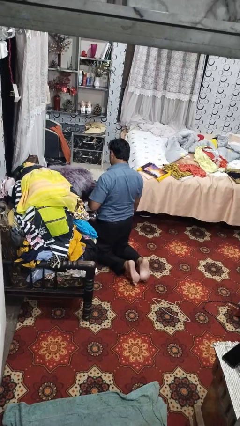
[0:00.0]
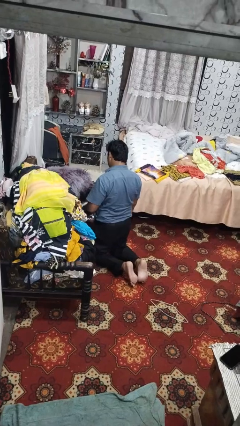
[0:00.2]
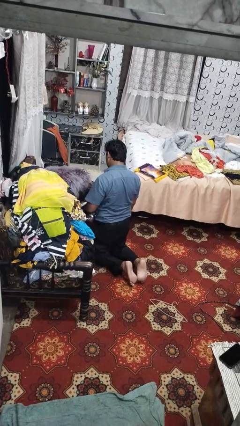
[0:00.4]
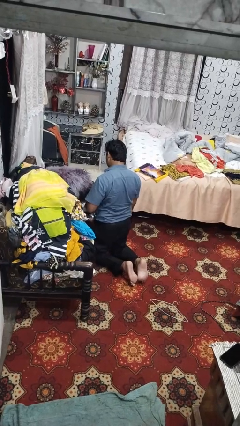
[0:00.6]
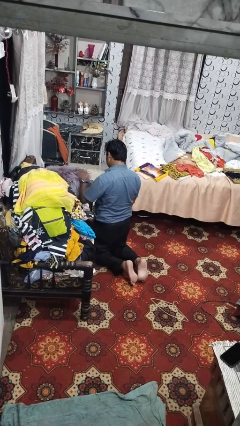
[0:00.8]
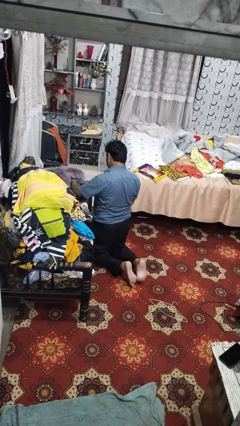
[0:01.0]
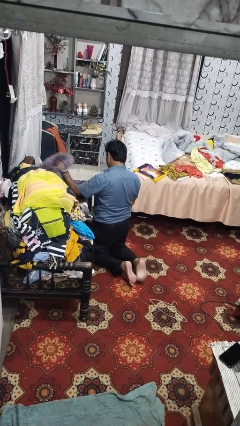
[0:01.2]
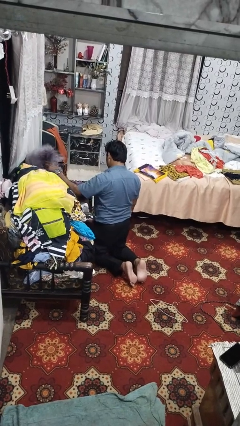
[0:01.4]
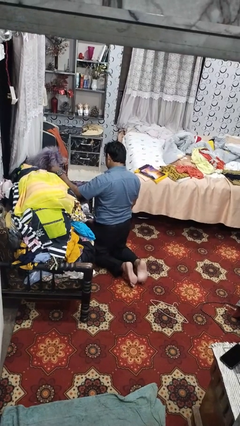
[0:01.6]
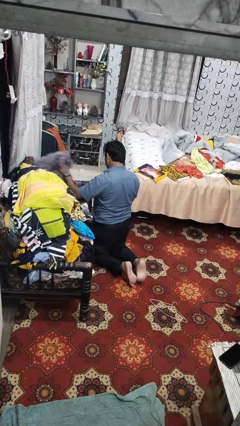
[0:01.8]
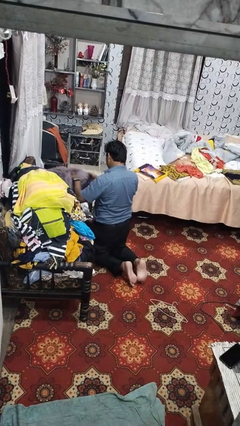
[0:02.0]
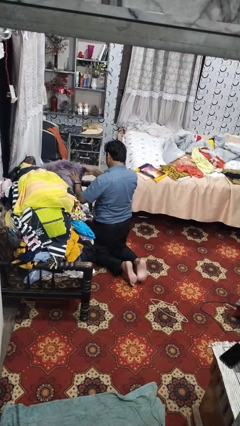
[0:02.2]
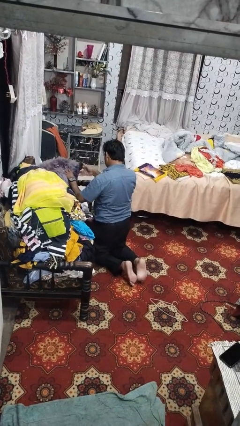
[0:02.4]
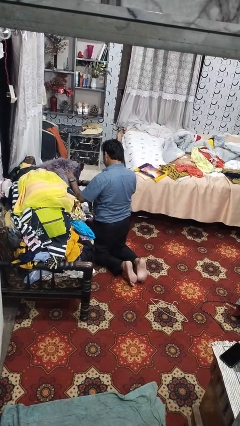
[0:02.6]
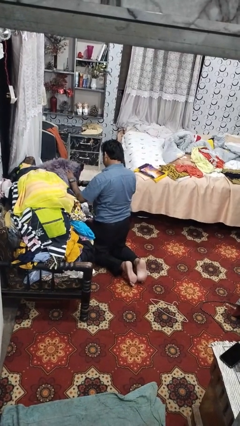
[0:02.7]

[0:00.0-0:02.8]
person searches in couch

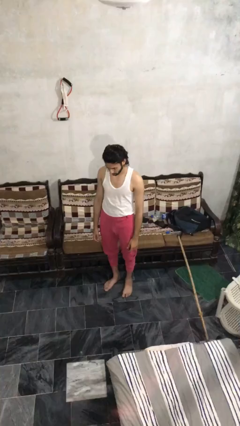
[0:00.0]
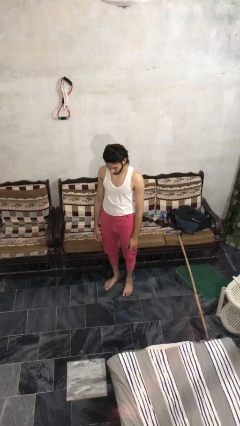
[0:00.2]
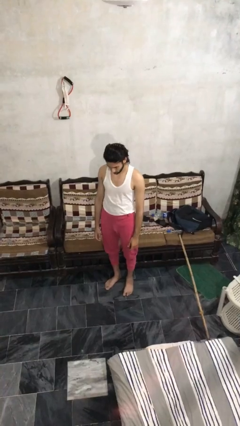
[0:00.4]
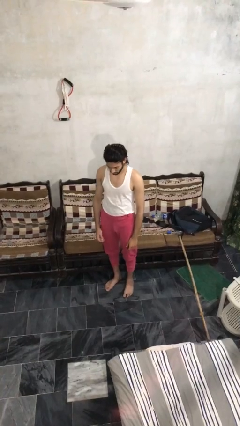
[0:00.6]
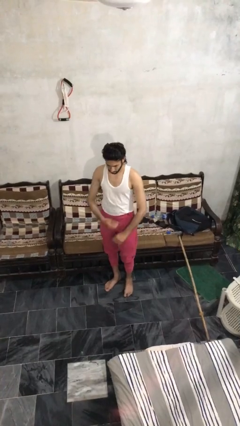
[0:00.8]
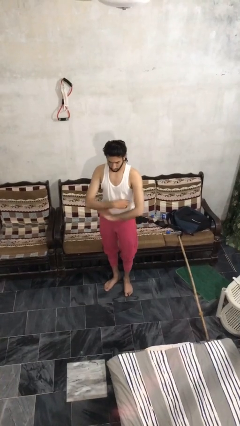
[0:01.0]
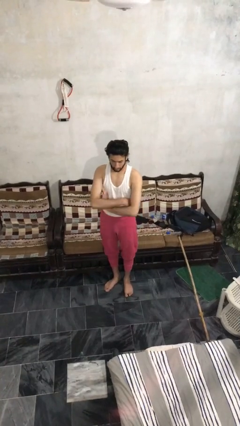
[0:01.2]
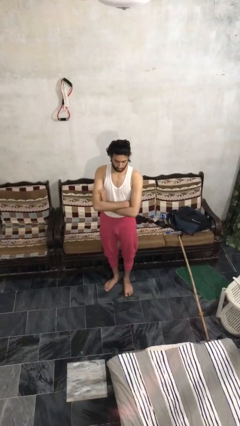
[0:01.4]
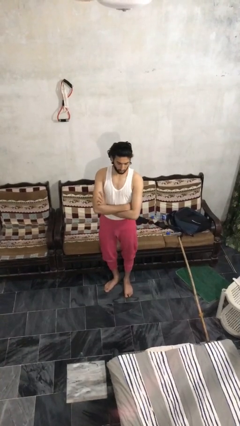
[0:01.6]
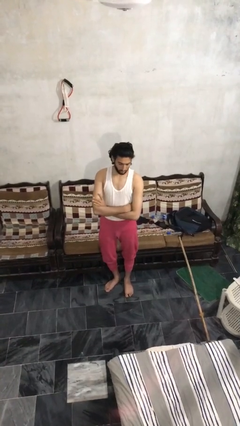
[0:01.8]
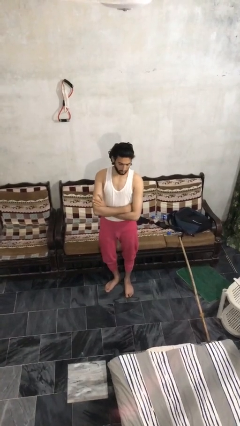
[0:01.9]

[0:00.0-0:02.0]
person crosses arms

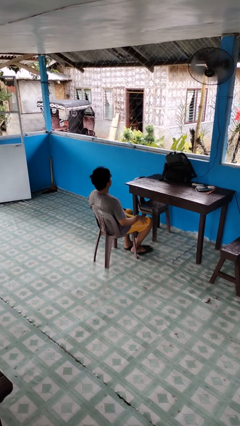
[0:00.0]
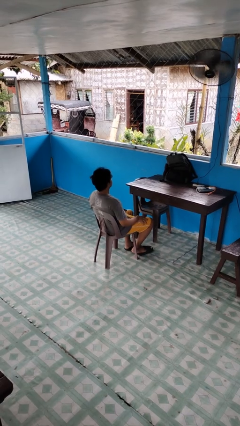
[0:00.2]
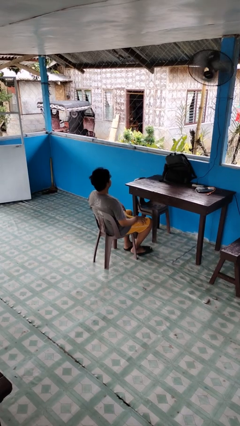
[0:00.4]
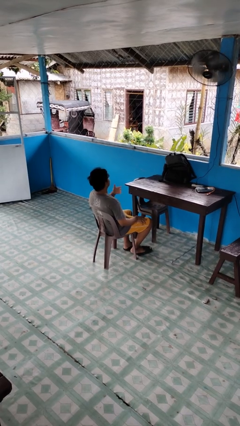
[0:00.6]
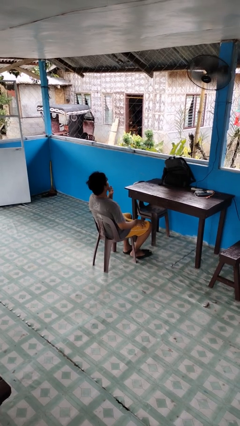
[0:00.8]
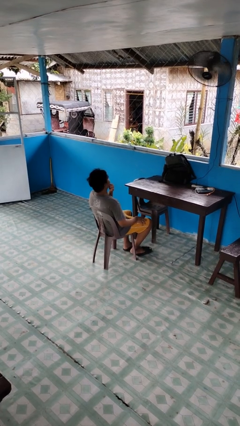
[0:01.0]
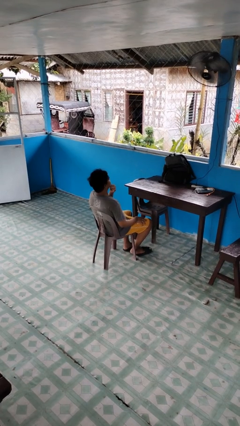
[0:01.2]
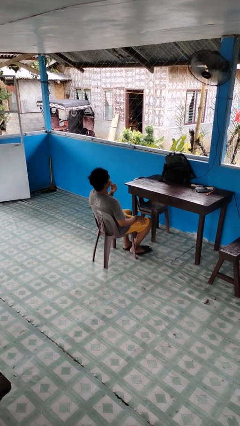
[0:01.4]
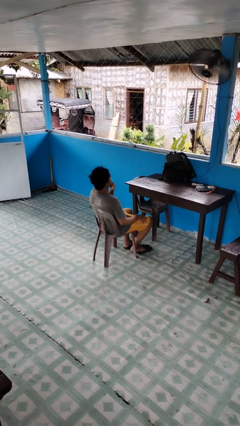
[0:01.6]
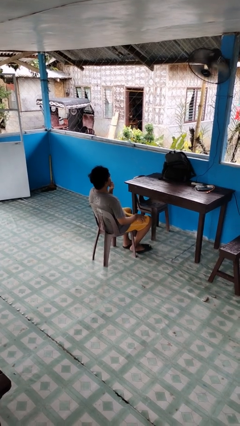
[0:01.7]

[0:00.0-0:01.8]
person strokes chin

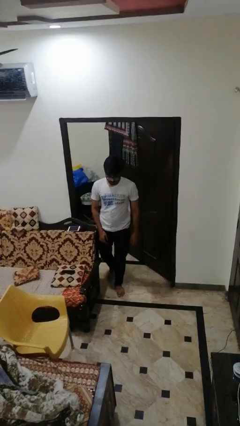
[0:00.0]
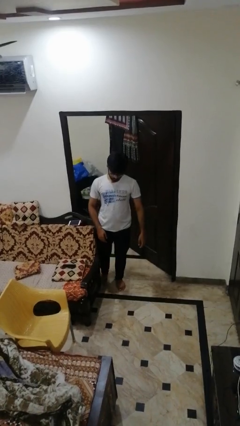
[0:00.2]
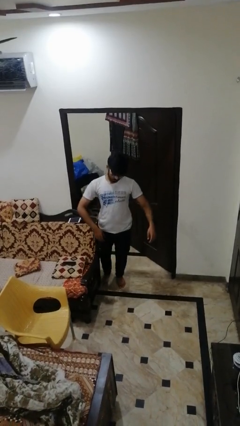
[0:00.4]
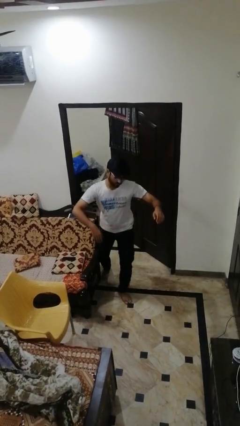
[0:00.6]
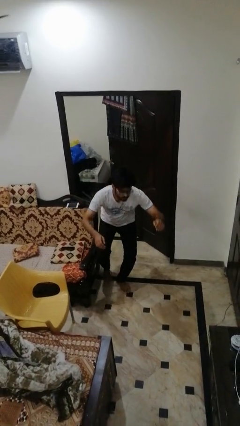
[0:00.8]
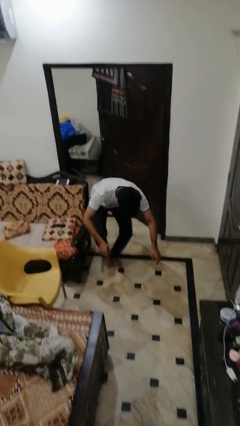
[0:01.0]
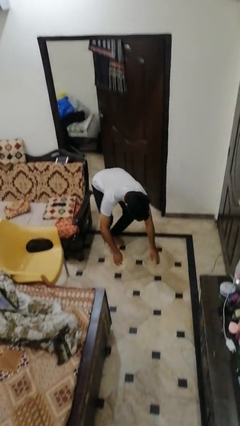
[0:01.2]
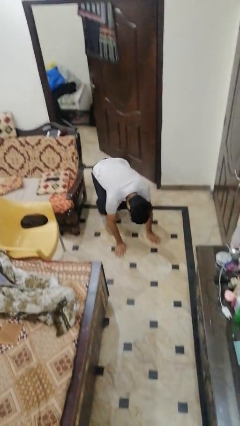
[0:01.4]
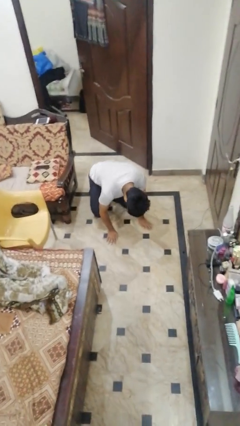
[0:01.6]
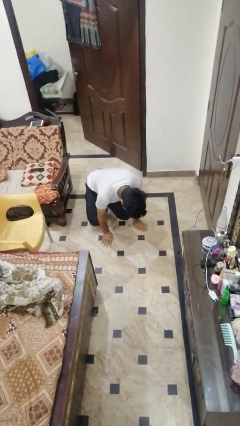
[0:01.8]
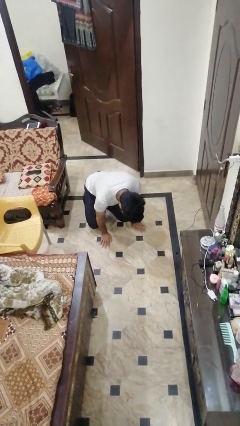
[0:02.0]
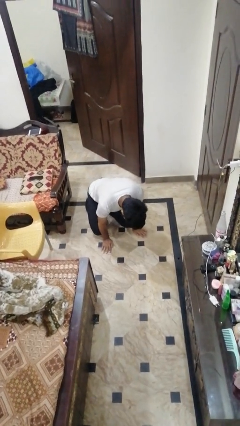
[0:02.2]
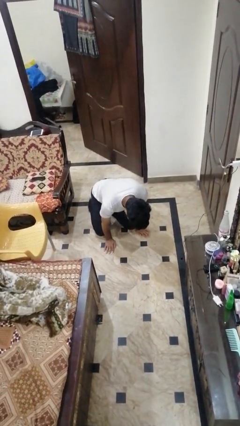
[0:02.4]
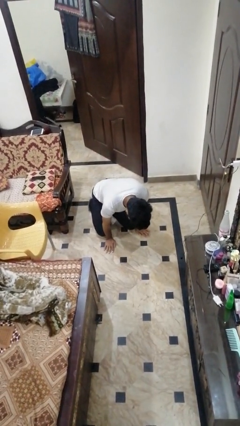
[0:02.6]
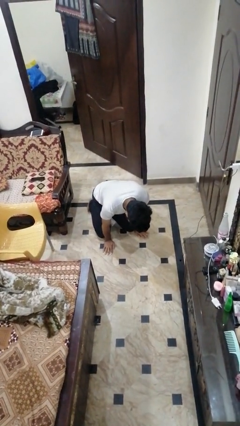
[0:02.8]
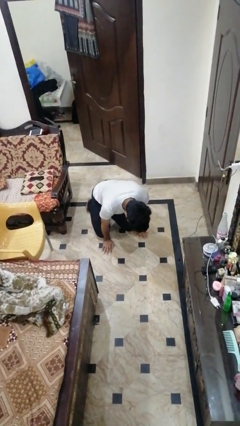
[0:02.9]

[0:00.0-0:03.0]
person trips on object on floor

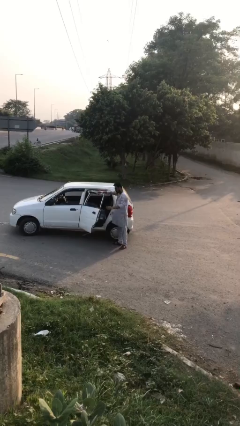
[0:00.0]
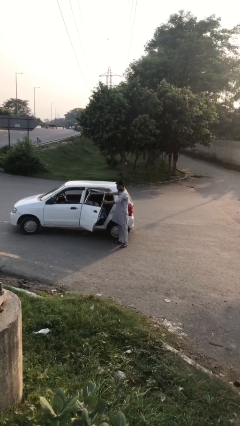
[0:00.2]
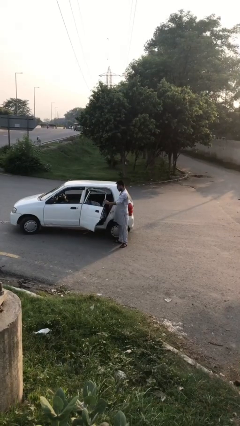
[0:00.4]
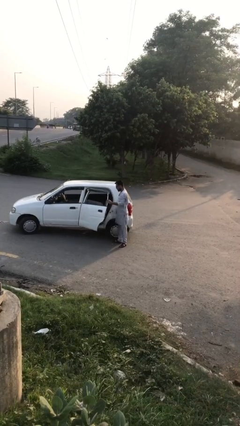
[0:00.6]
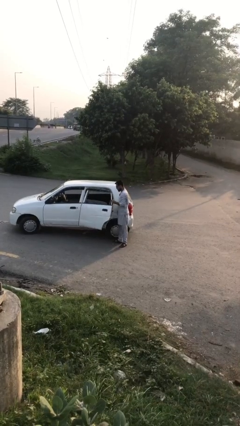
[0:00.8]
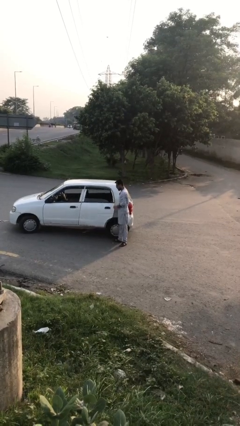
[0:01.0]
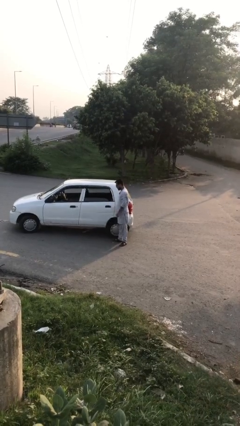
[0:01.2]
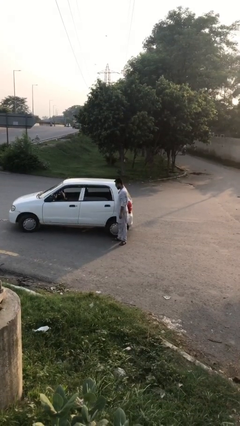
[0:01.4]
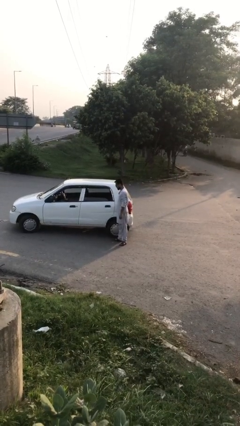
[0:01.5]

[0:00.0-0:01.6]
person closes car door

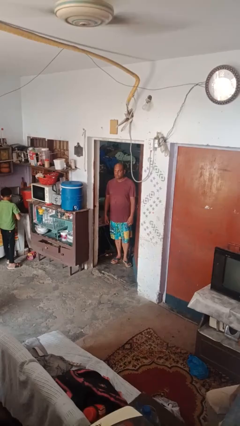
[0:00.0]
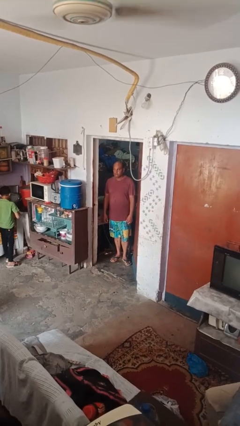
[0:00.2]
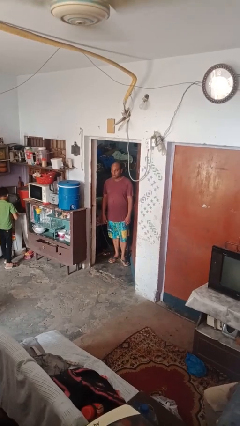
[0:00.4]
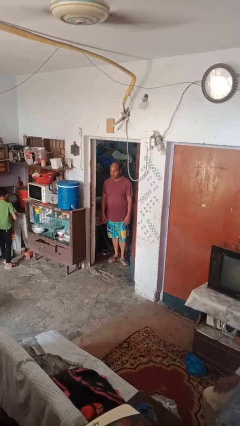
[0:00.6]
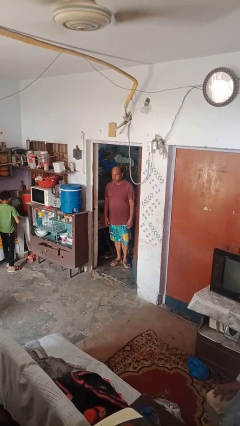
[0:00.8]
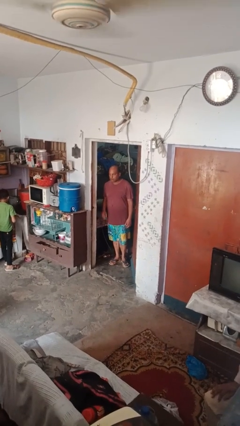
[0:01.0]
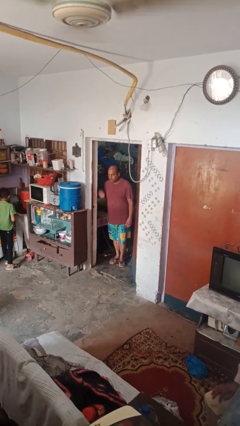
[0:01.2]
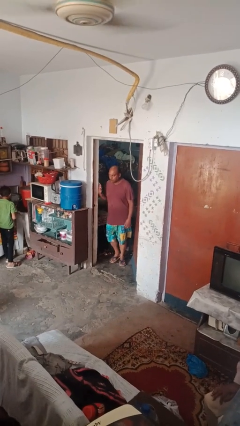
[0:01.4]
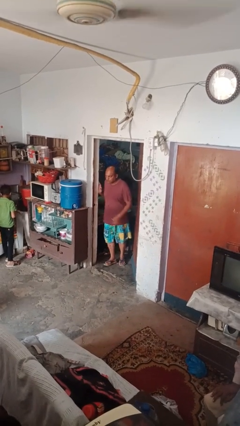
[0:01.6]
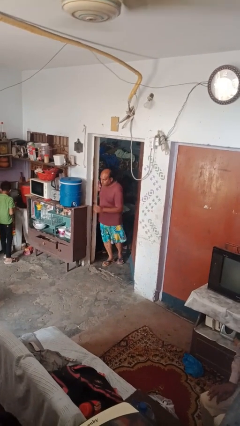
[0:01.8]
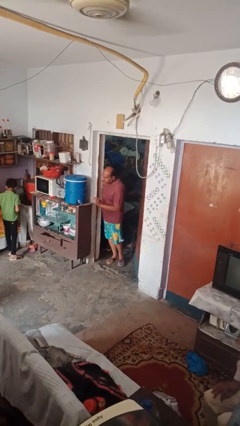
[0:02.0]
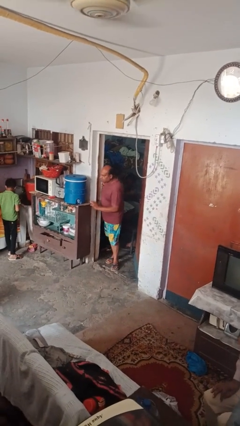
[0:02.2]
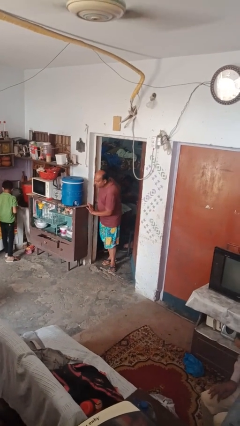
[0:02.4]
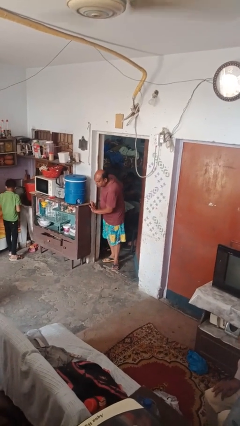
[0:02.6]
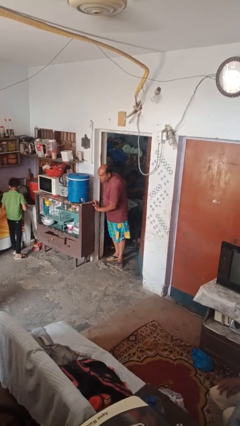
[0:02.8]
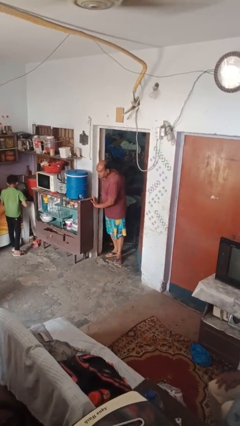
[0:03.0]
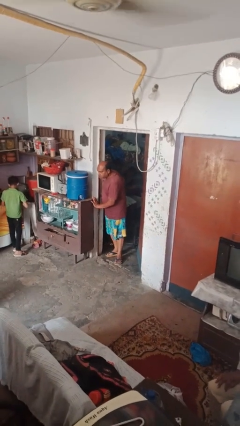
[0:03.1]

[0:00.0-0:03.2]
person bumps into wall

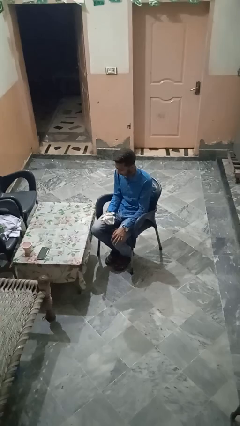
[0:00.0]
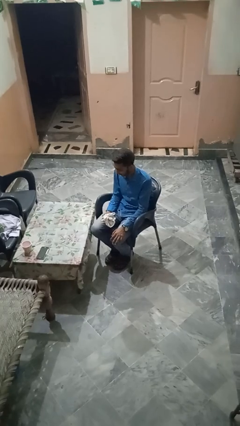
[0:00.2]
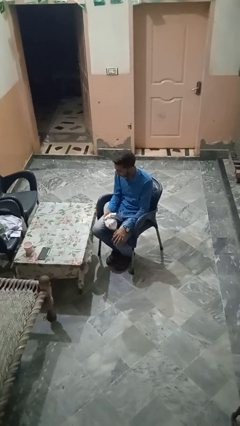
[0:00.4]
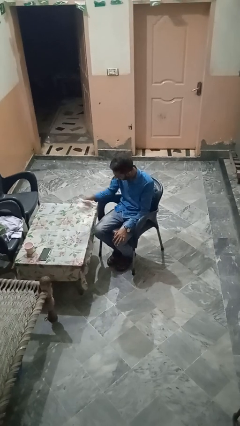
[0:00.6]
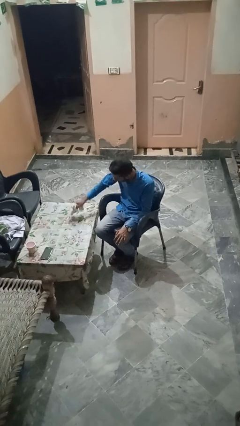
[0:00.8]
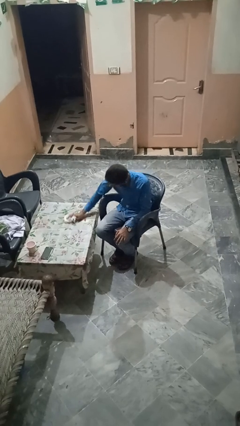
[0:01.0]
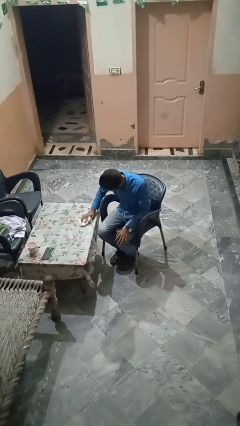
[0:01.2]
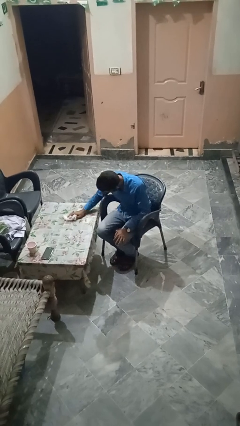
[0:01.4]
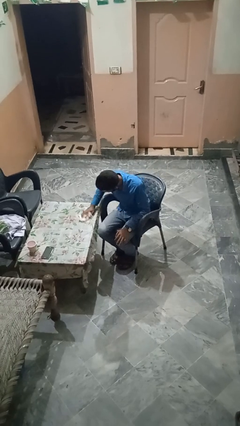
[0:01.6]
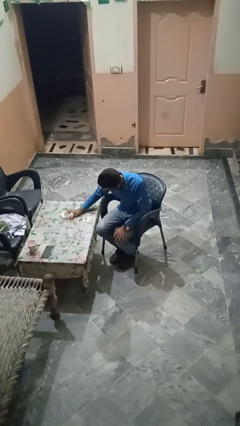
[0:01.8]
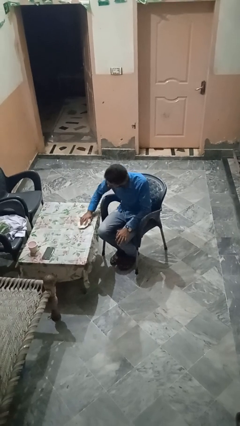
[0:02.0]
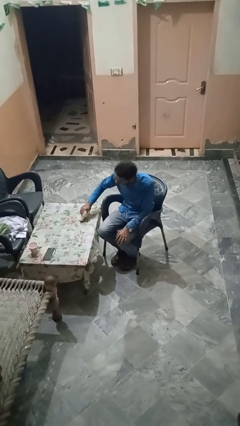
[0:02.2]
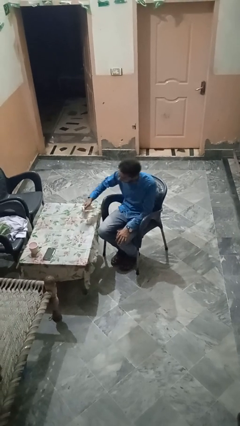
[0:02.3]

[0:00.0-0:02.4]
person cleans table with rag

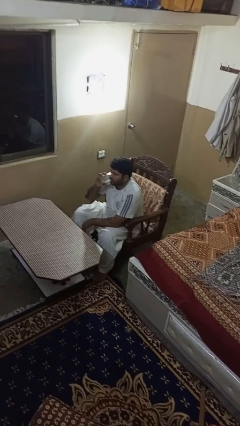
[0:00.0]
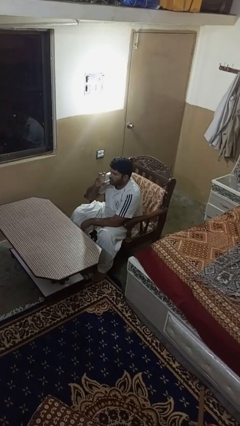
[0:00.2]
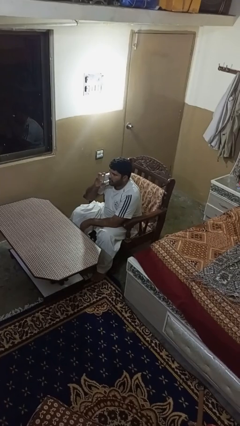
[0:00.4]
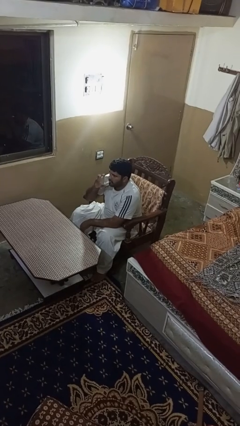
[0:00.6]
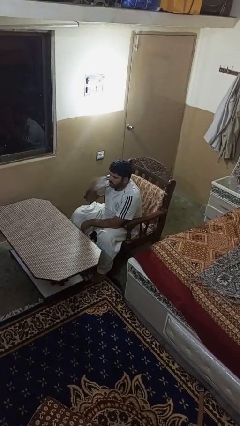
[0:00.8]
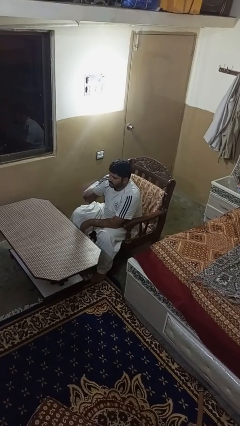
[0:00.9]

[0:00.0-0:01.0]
person puts down object on table
